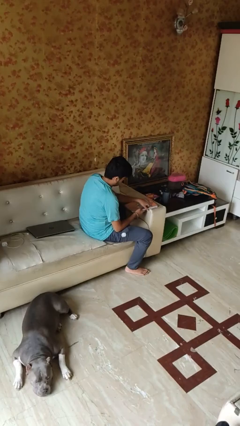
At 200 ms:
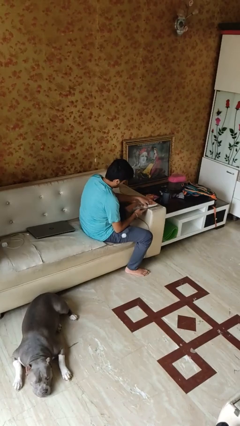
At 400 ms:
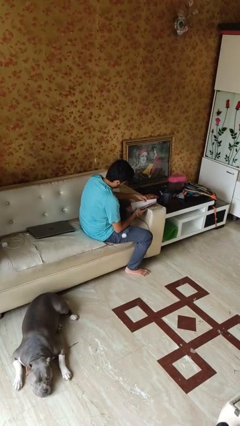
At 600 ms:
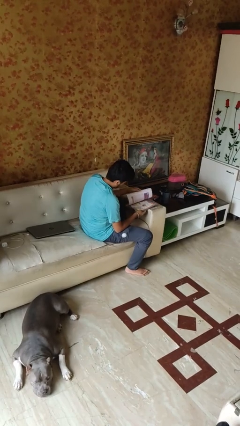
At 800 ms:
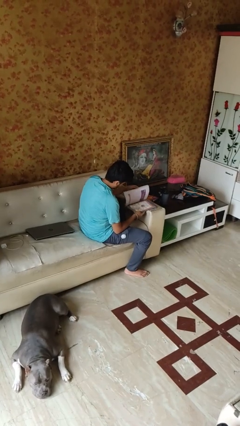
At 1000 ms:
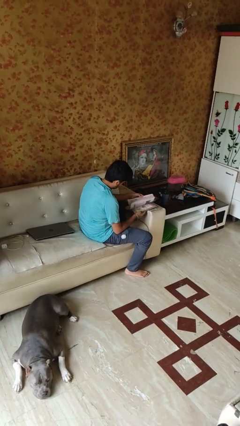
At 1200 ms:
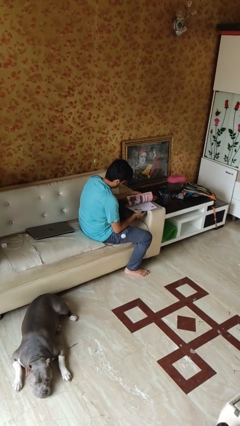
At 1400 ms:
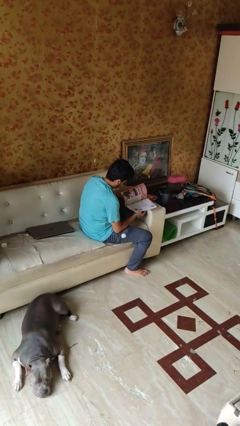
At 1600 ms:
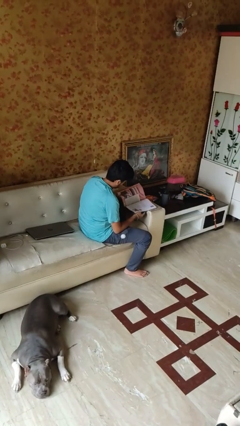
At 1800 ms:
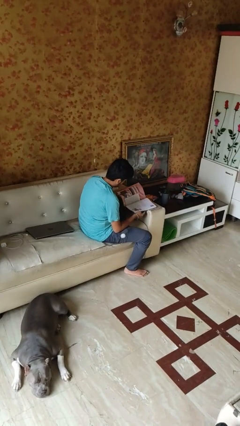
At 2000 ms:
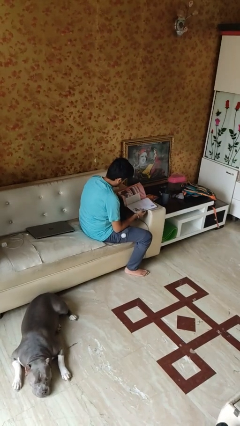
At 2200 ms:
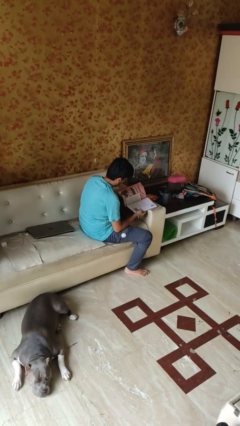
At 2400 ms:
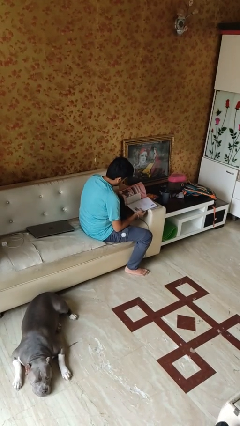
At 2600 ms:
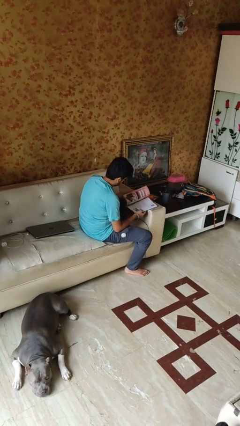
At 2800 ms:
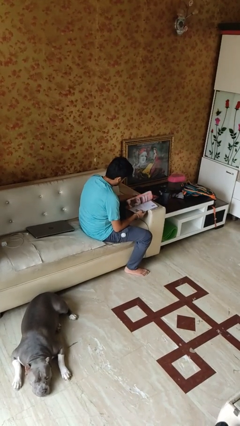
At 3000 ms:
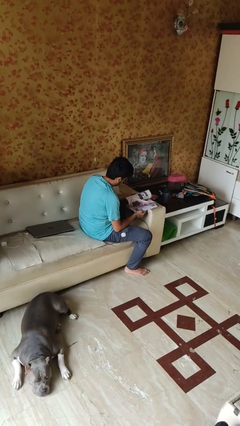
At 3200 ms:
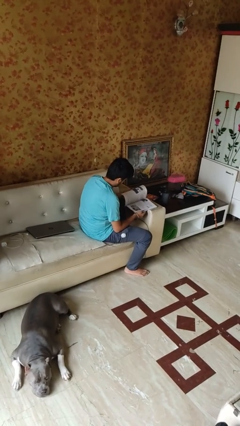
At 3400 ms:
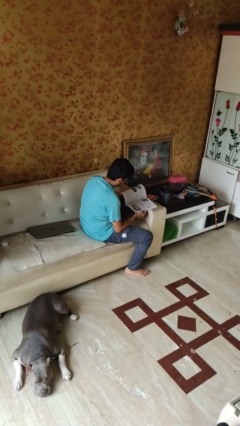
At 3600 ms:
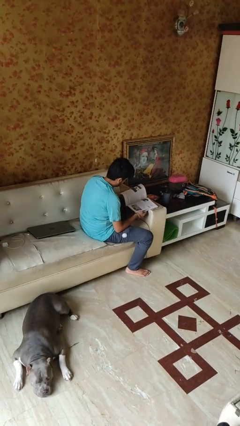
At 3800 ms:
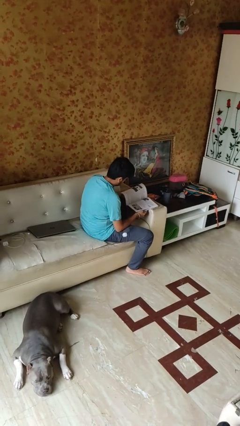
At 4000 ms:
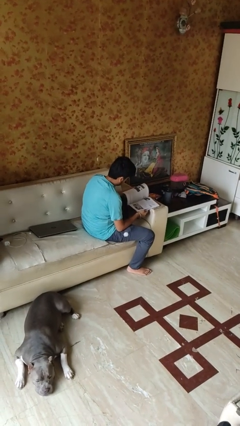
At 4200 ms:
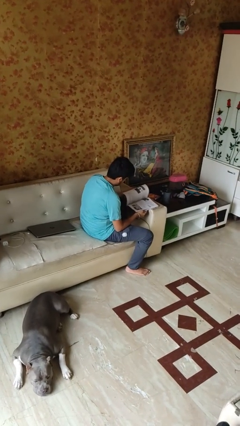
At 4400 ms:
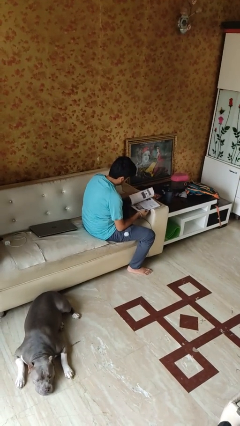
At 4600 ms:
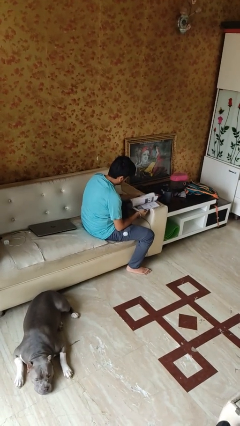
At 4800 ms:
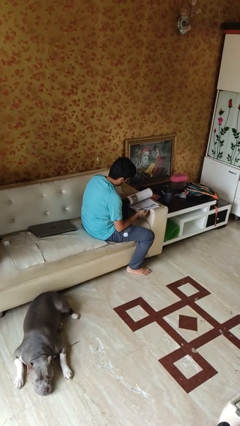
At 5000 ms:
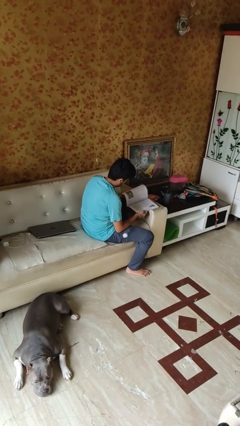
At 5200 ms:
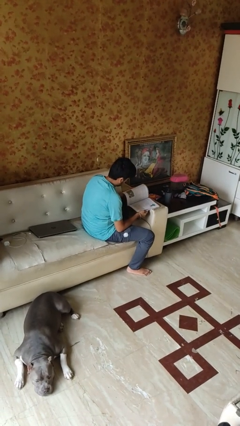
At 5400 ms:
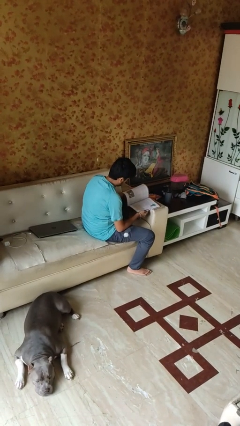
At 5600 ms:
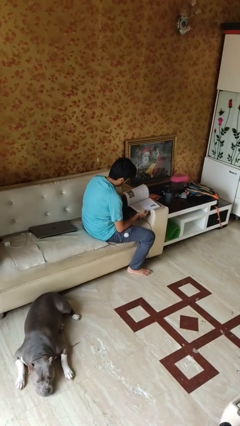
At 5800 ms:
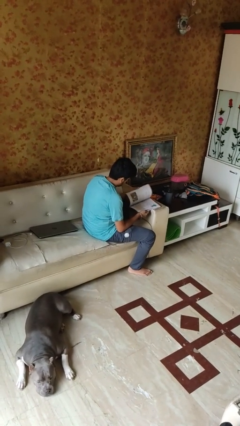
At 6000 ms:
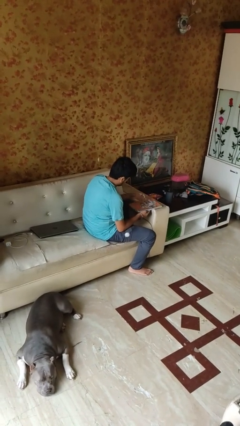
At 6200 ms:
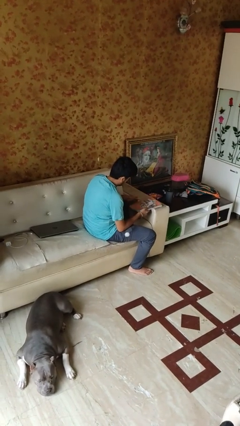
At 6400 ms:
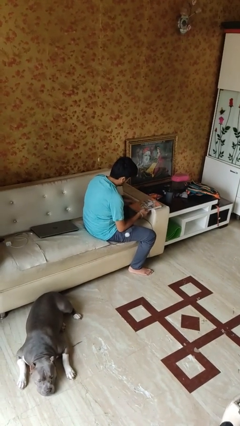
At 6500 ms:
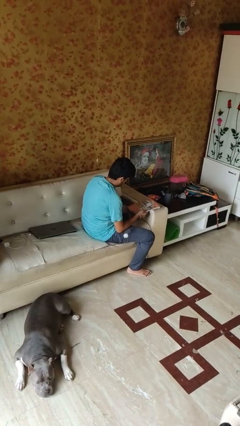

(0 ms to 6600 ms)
person reads magazine

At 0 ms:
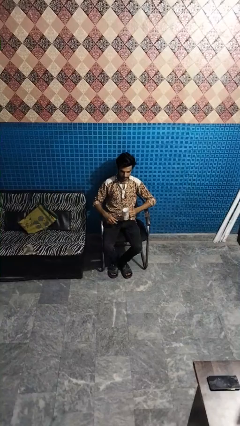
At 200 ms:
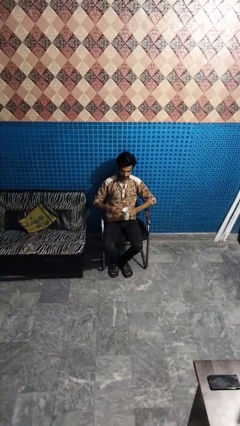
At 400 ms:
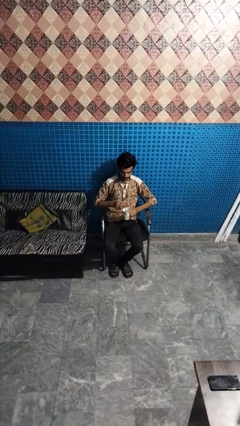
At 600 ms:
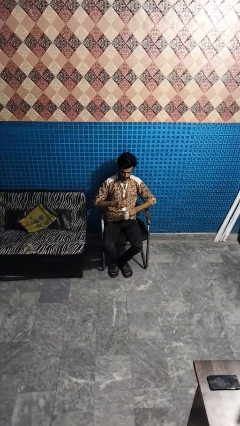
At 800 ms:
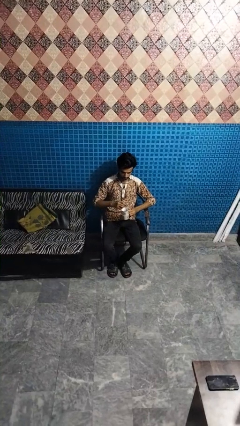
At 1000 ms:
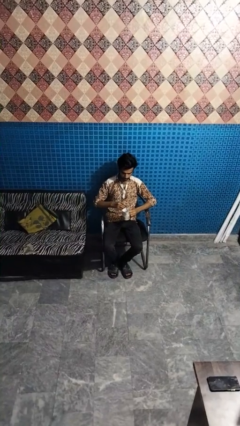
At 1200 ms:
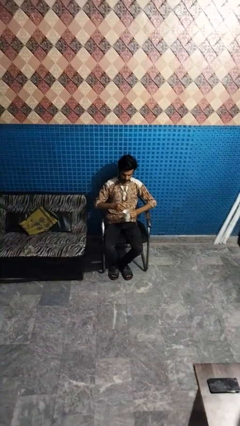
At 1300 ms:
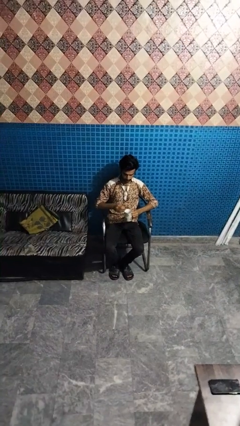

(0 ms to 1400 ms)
person stirs mug

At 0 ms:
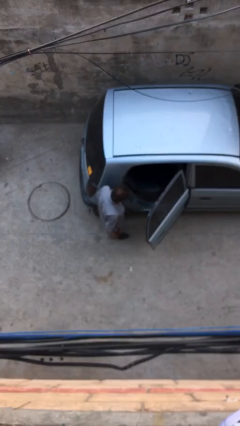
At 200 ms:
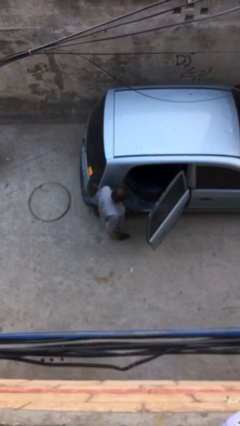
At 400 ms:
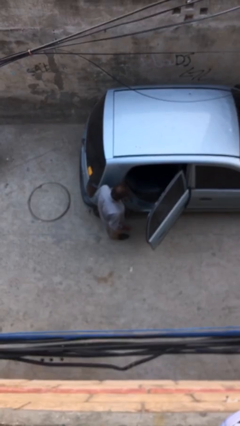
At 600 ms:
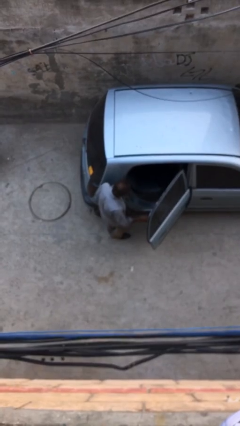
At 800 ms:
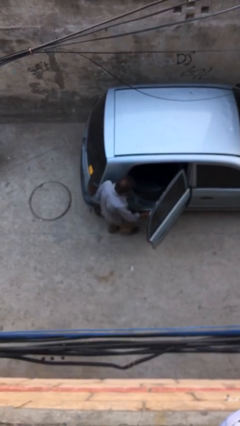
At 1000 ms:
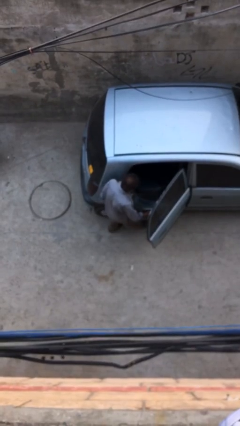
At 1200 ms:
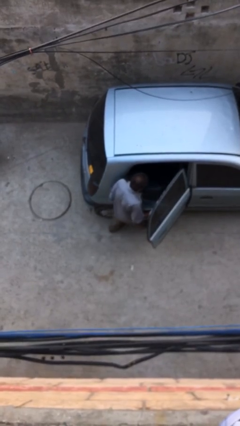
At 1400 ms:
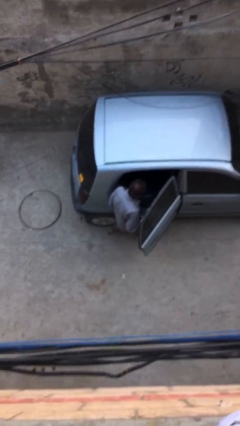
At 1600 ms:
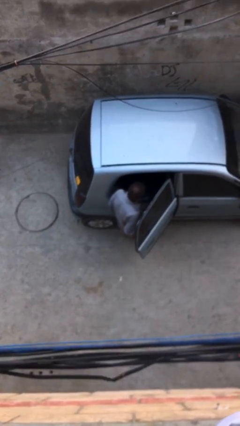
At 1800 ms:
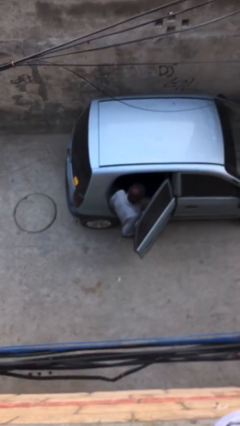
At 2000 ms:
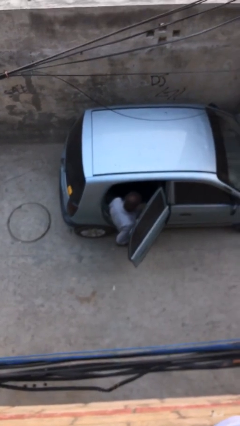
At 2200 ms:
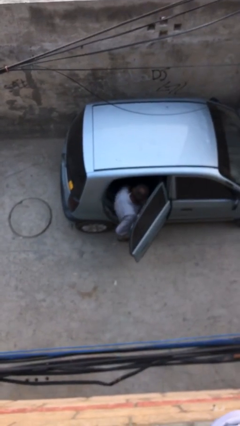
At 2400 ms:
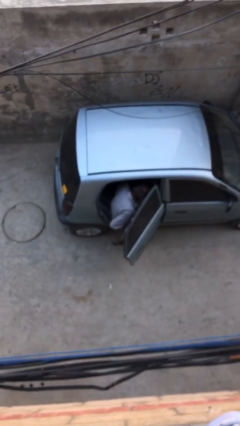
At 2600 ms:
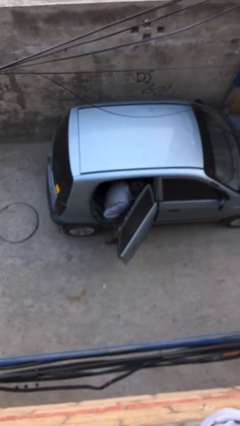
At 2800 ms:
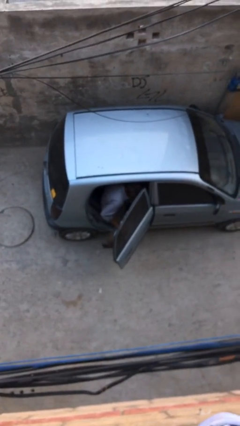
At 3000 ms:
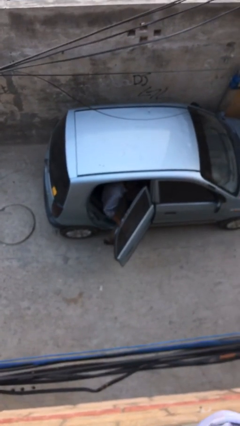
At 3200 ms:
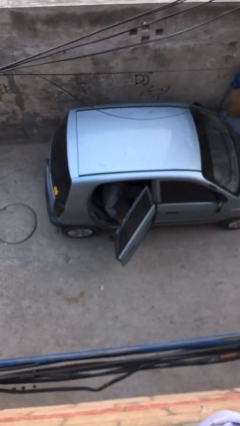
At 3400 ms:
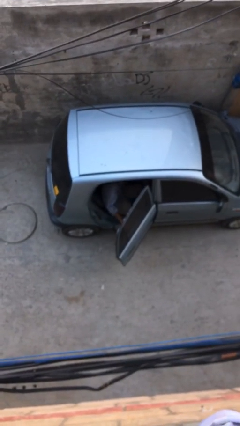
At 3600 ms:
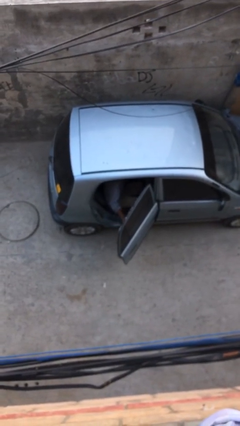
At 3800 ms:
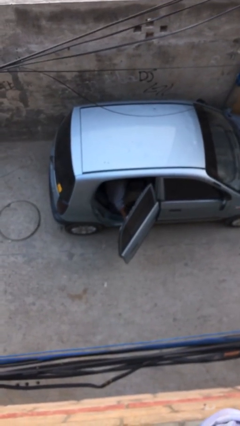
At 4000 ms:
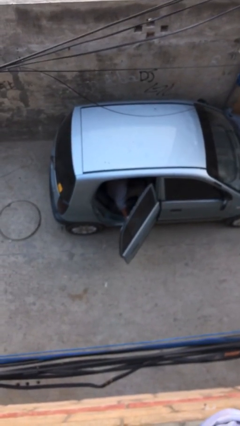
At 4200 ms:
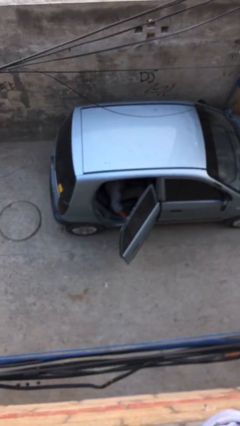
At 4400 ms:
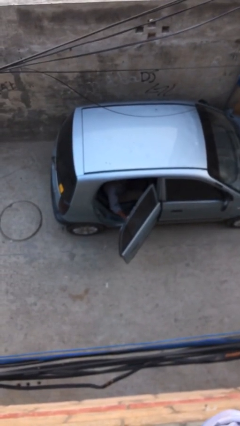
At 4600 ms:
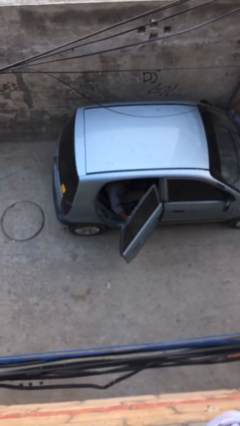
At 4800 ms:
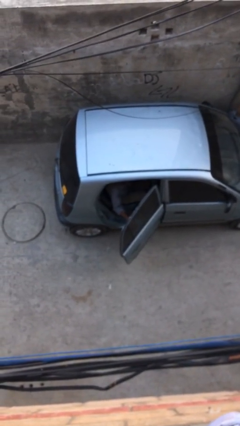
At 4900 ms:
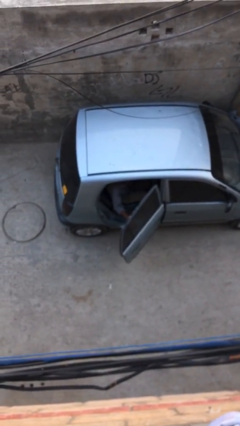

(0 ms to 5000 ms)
person enters car

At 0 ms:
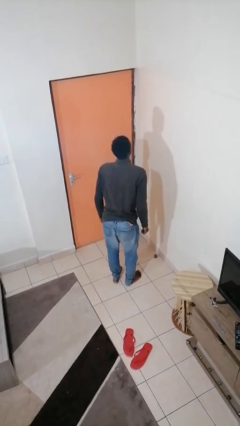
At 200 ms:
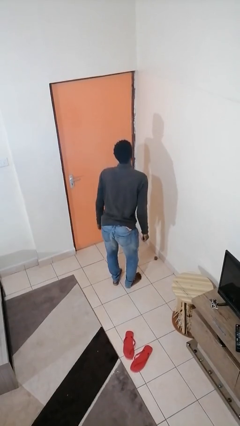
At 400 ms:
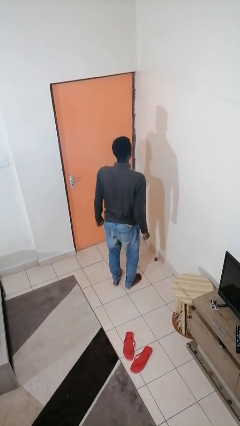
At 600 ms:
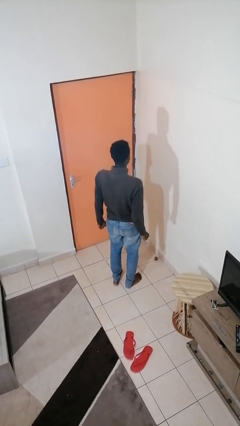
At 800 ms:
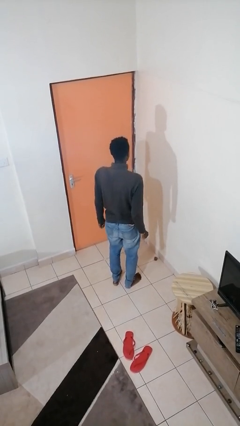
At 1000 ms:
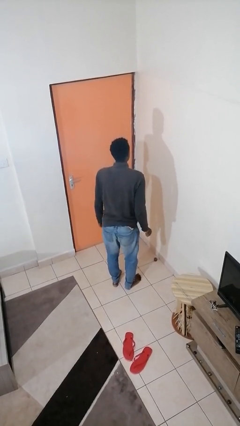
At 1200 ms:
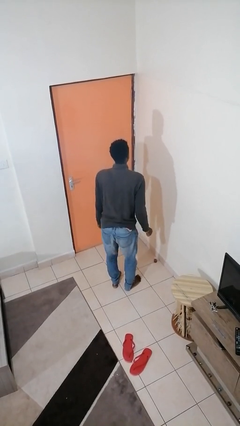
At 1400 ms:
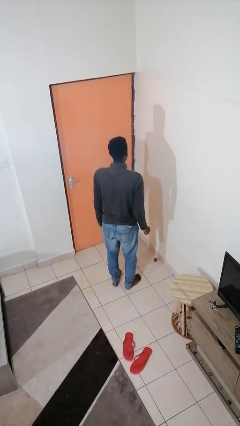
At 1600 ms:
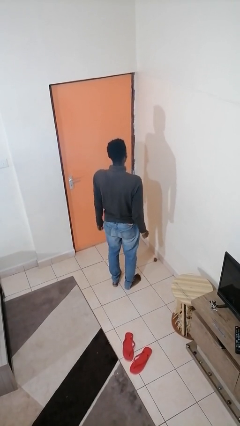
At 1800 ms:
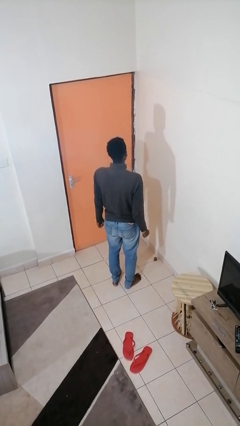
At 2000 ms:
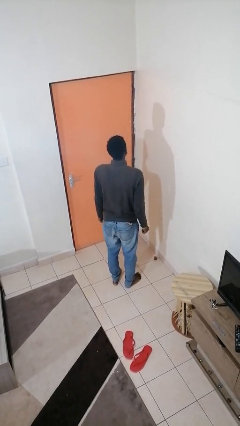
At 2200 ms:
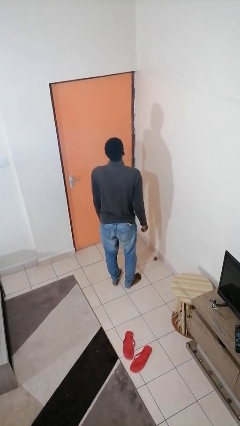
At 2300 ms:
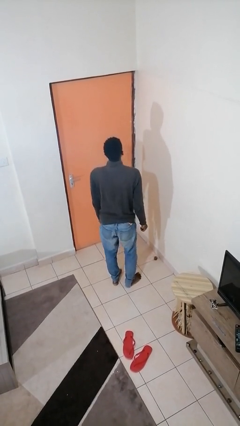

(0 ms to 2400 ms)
person wiggles hips

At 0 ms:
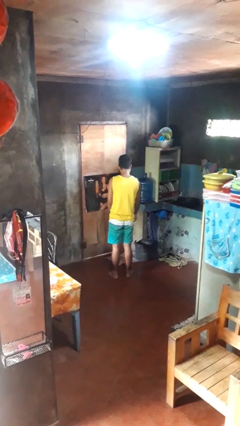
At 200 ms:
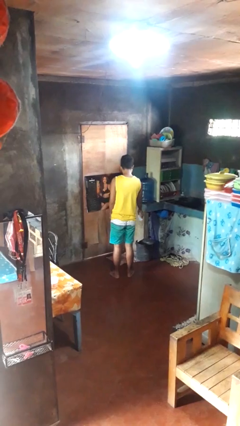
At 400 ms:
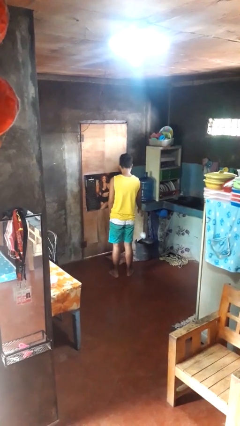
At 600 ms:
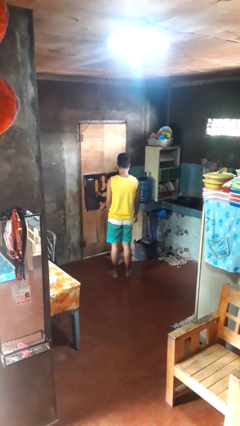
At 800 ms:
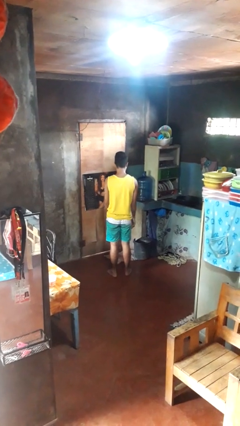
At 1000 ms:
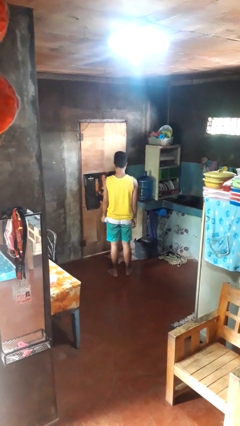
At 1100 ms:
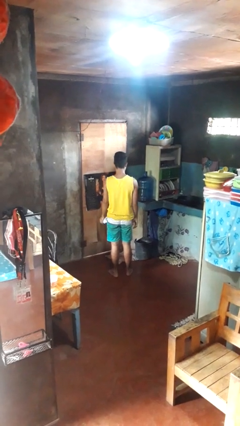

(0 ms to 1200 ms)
person discards trash

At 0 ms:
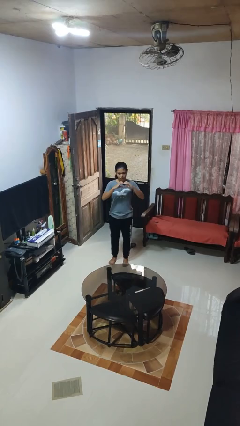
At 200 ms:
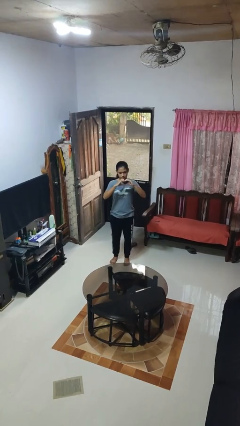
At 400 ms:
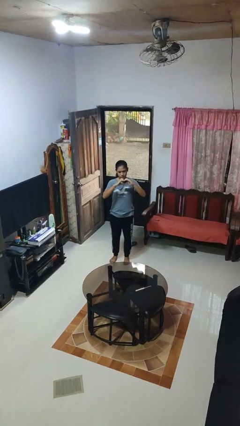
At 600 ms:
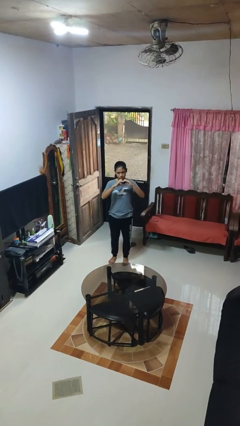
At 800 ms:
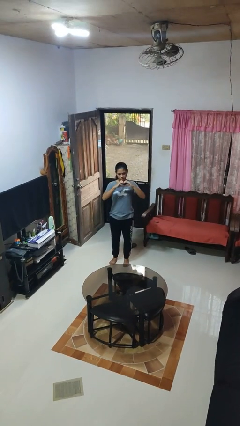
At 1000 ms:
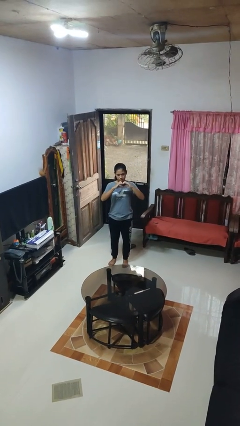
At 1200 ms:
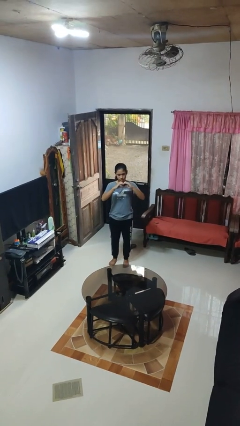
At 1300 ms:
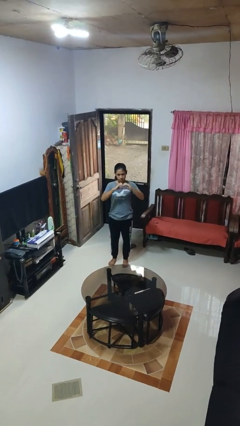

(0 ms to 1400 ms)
person gestures heart
